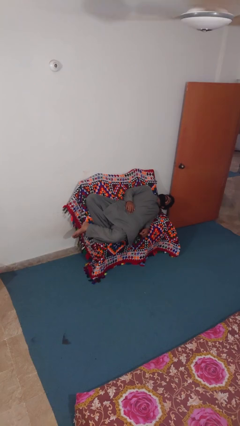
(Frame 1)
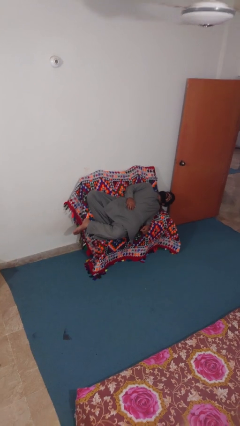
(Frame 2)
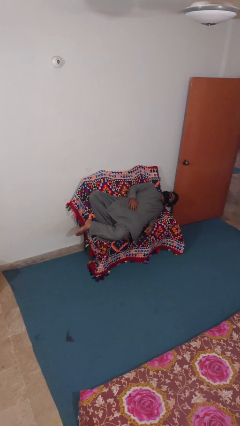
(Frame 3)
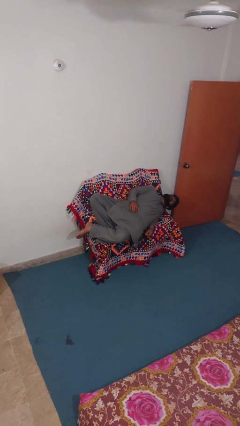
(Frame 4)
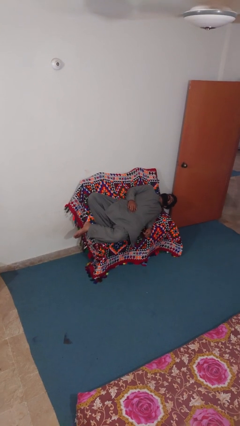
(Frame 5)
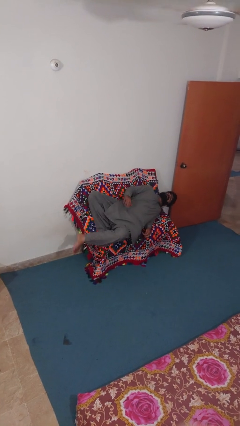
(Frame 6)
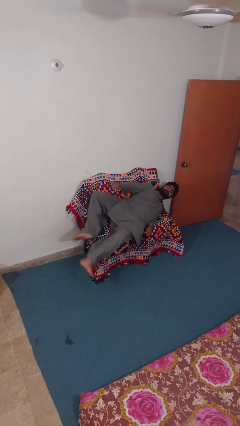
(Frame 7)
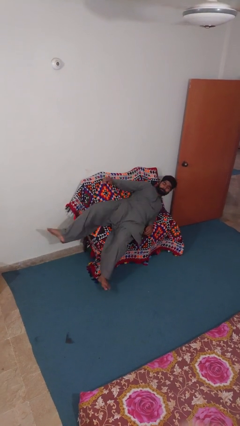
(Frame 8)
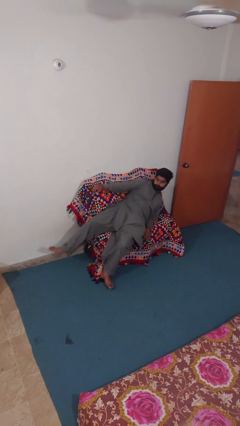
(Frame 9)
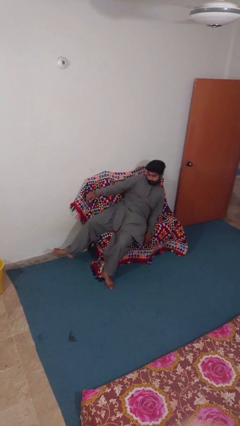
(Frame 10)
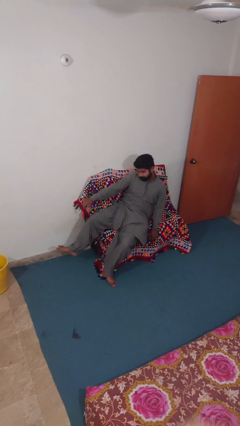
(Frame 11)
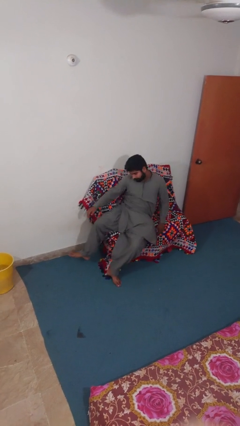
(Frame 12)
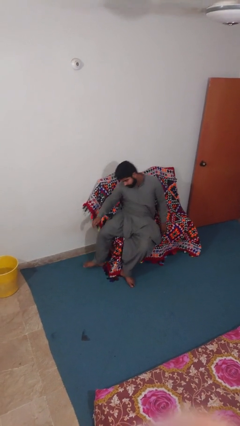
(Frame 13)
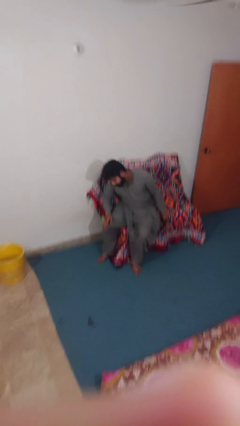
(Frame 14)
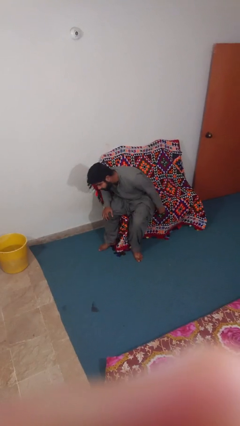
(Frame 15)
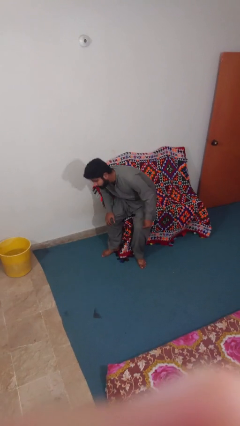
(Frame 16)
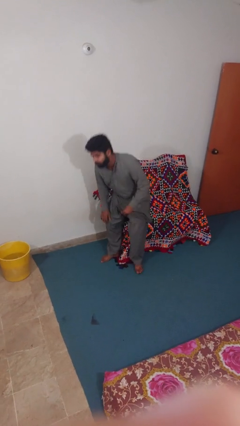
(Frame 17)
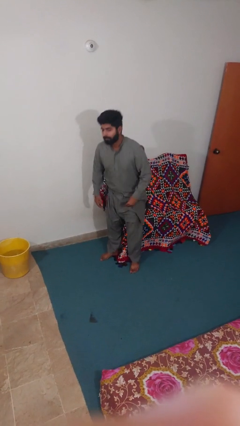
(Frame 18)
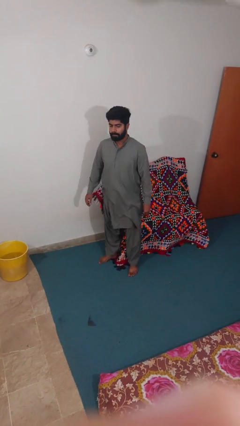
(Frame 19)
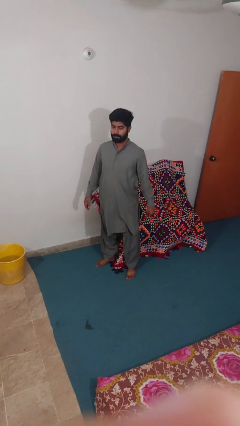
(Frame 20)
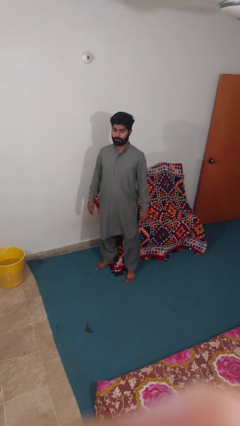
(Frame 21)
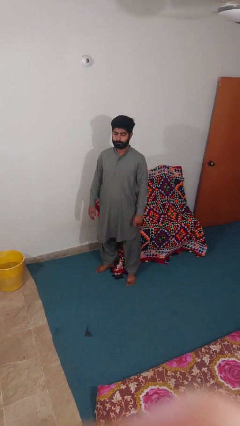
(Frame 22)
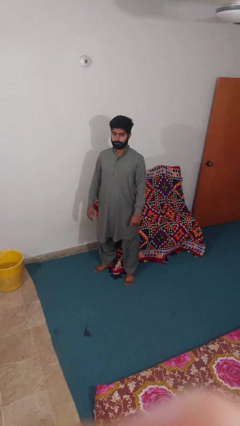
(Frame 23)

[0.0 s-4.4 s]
person stands up

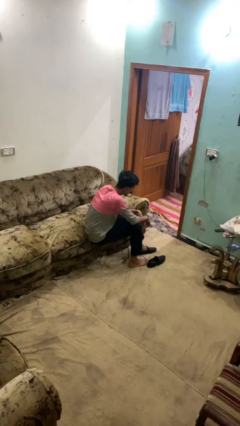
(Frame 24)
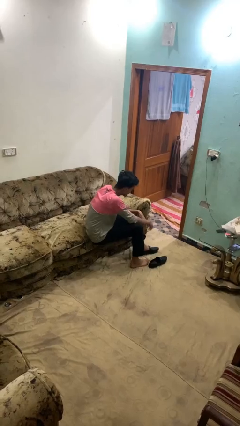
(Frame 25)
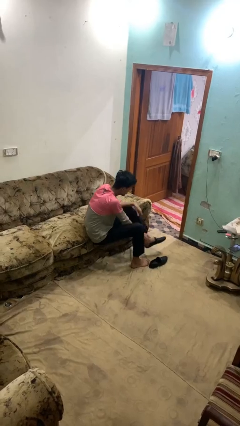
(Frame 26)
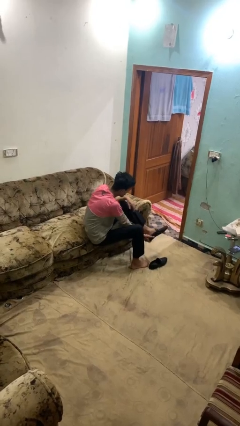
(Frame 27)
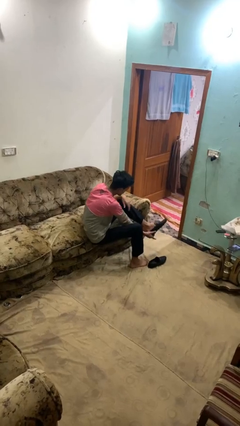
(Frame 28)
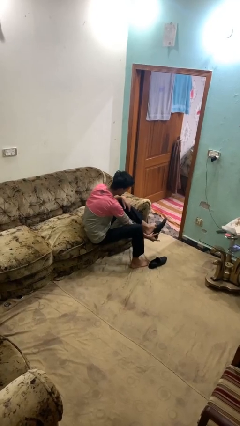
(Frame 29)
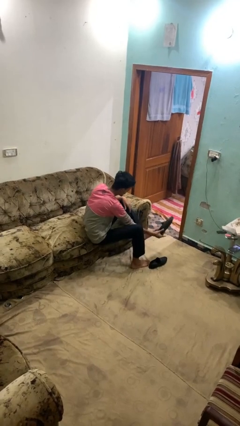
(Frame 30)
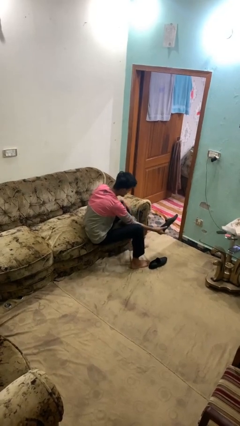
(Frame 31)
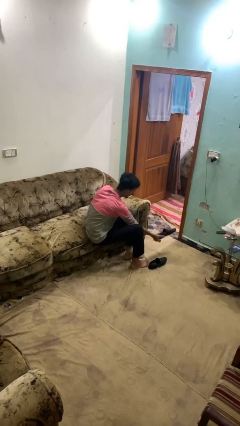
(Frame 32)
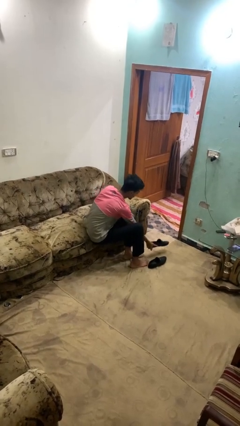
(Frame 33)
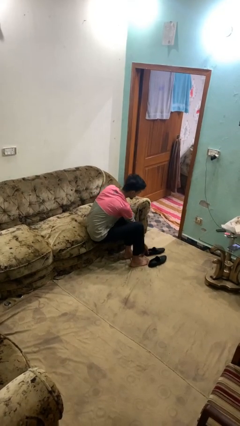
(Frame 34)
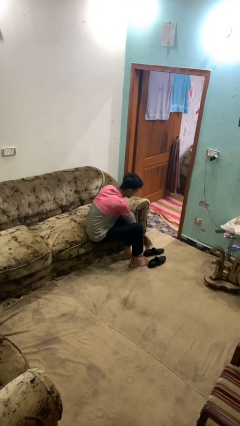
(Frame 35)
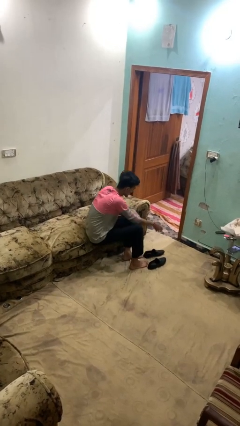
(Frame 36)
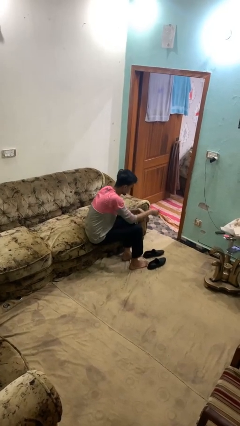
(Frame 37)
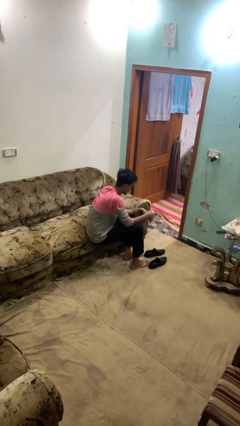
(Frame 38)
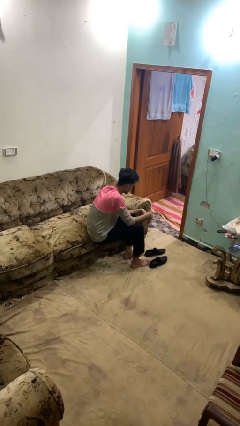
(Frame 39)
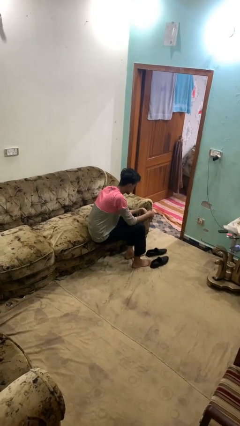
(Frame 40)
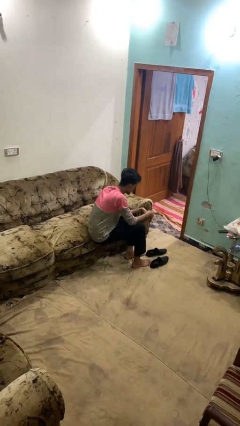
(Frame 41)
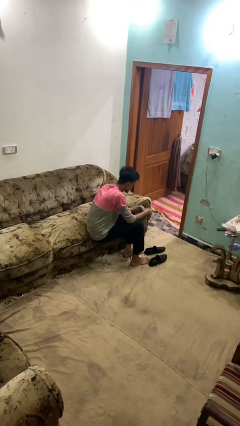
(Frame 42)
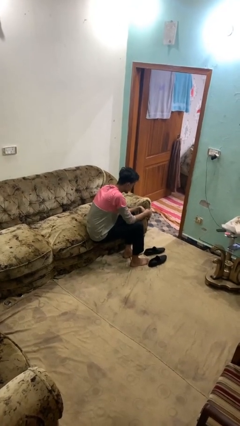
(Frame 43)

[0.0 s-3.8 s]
person takes off shoes

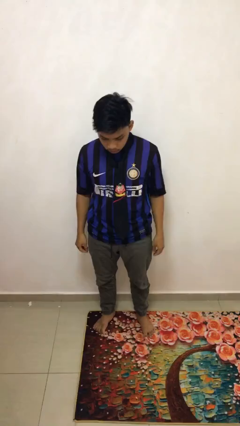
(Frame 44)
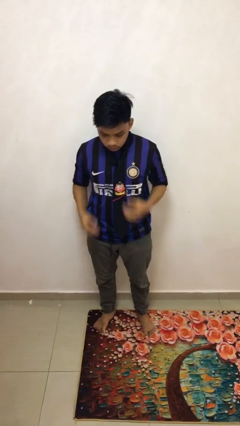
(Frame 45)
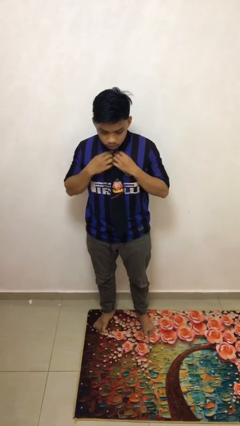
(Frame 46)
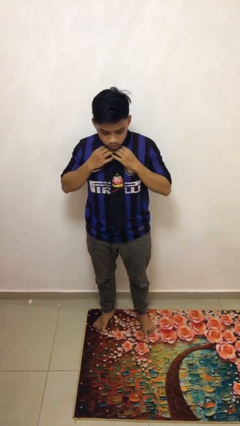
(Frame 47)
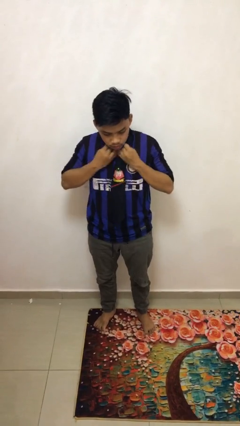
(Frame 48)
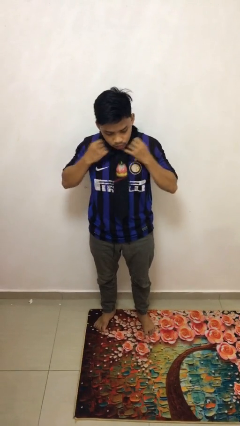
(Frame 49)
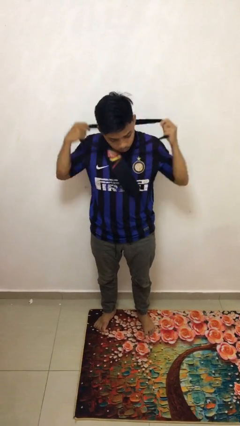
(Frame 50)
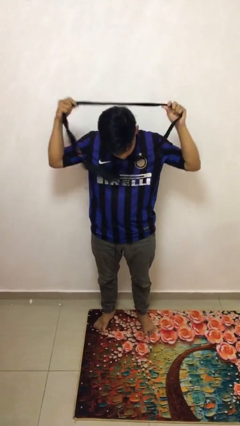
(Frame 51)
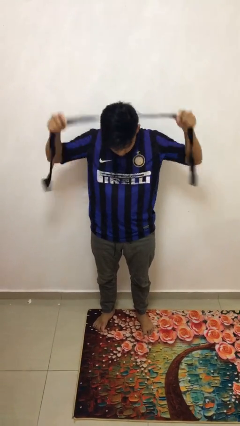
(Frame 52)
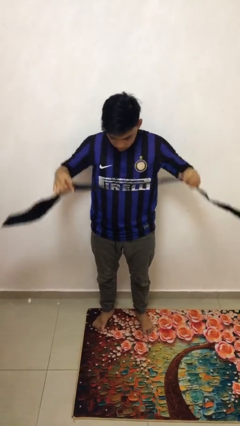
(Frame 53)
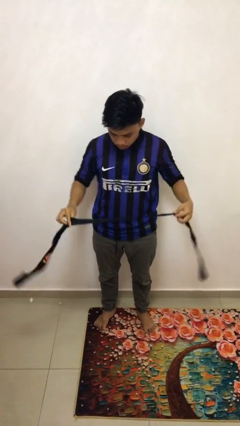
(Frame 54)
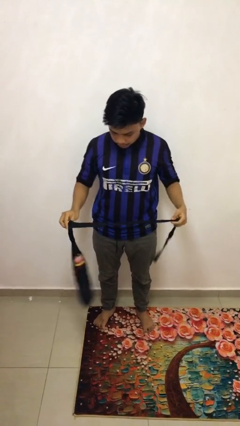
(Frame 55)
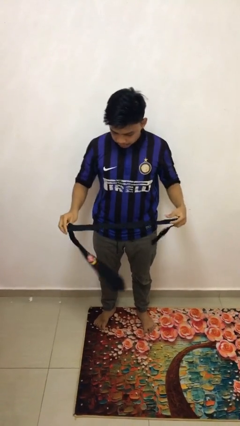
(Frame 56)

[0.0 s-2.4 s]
person takes off necktie

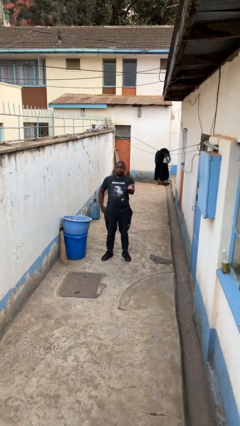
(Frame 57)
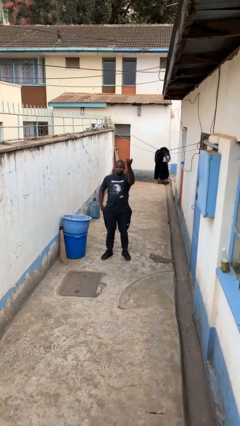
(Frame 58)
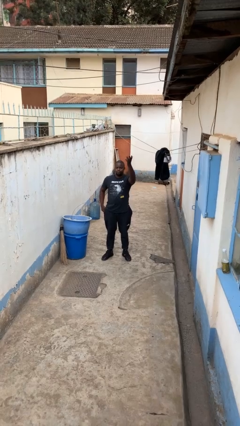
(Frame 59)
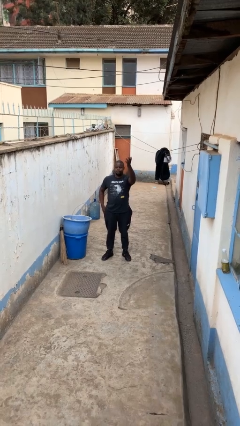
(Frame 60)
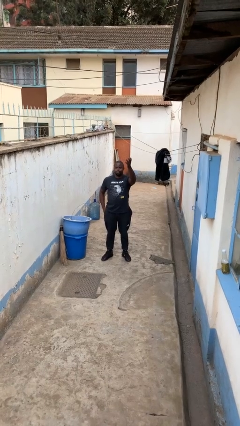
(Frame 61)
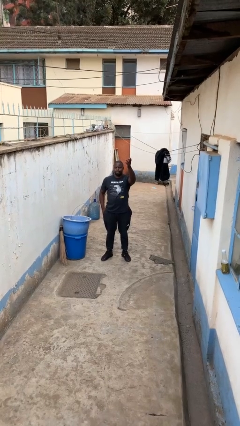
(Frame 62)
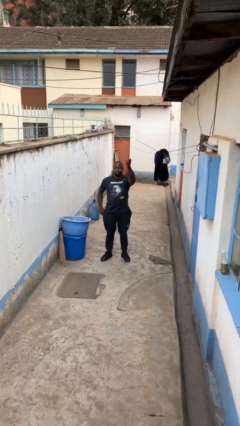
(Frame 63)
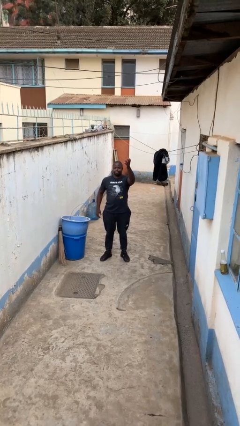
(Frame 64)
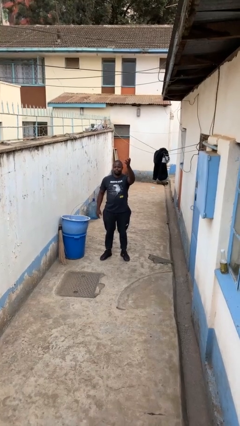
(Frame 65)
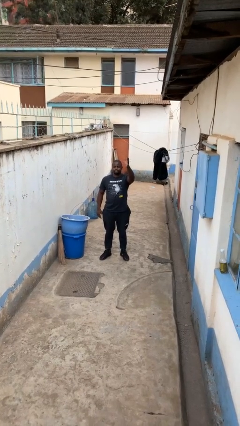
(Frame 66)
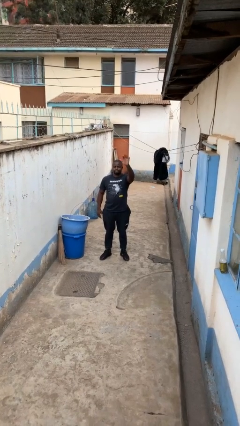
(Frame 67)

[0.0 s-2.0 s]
person gestures swipe up

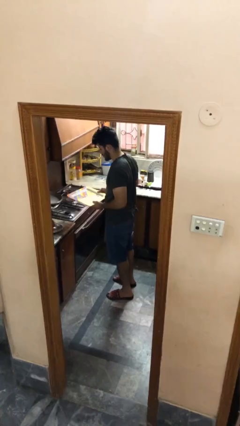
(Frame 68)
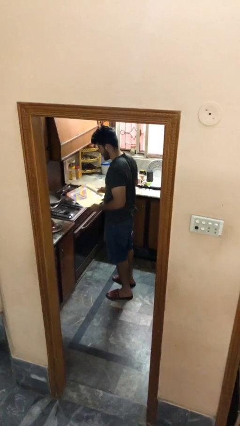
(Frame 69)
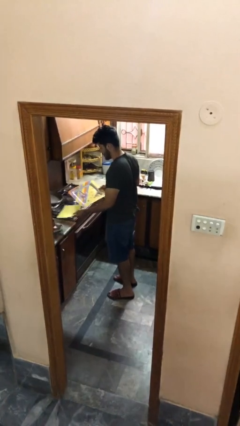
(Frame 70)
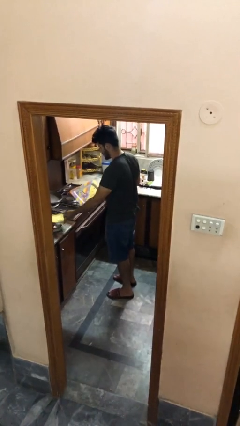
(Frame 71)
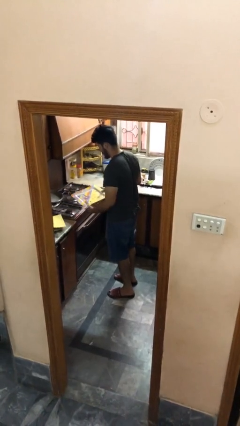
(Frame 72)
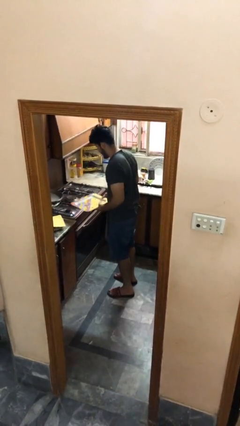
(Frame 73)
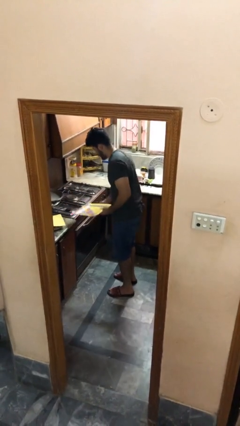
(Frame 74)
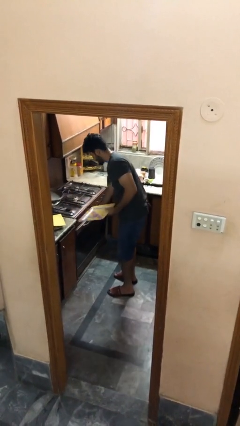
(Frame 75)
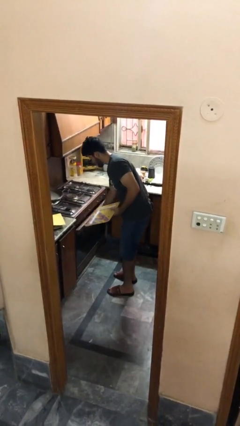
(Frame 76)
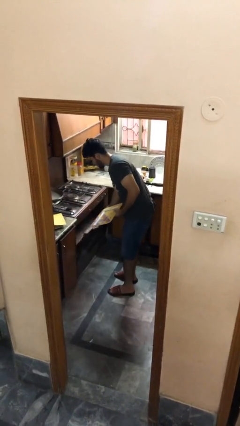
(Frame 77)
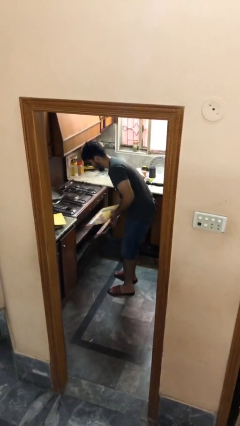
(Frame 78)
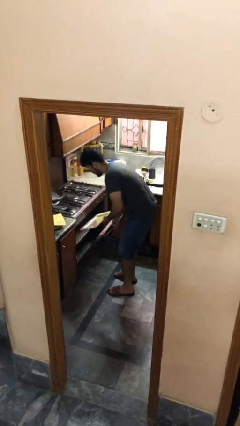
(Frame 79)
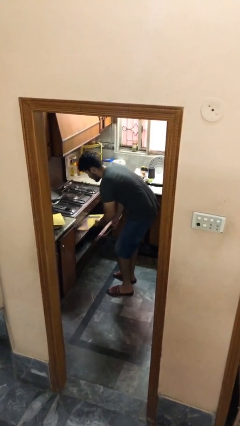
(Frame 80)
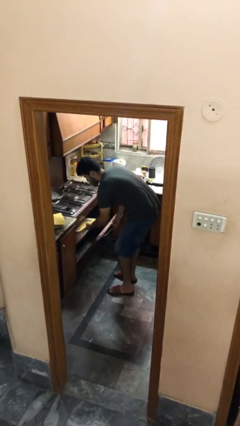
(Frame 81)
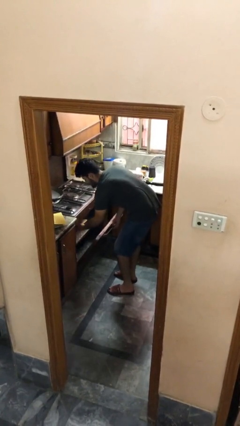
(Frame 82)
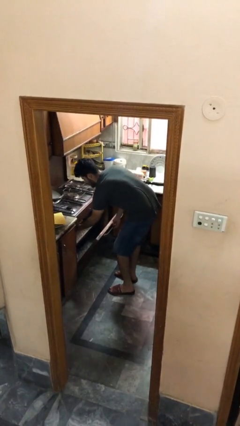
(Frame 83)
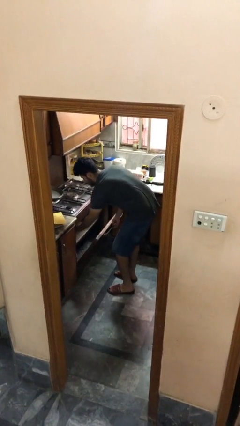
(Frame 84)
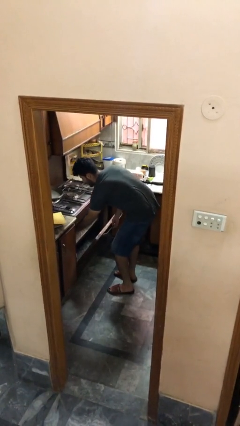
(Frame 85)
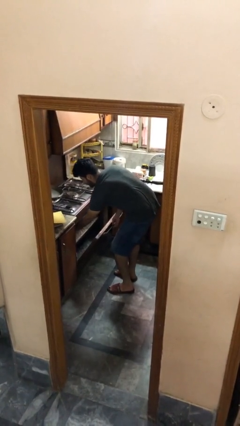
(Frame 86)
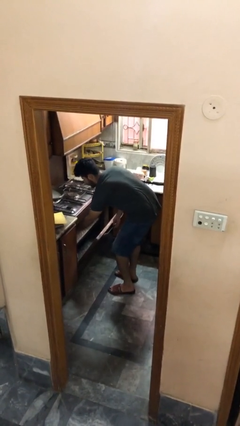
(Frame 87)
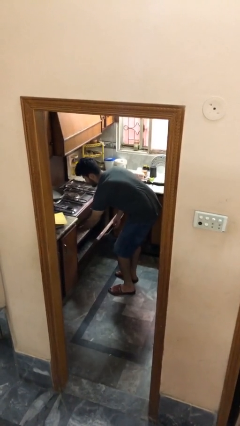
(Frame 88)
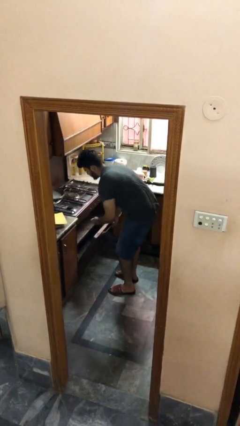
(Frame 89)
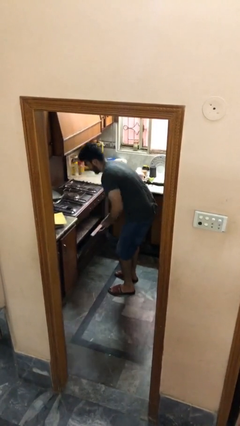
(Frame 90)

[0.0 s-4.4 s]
person puts object into oven

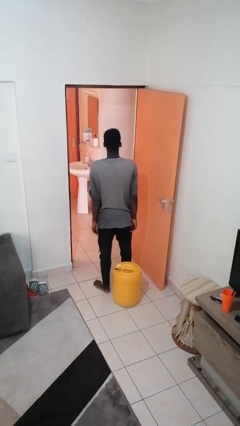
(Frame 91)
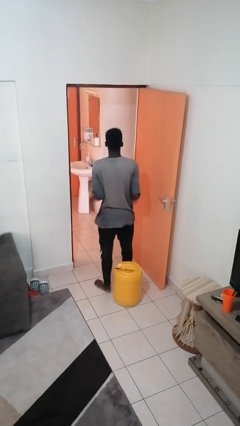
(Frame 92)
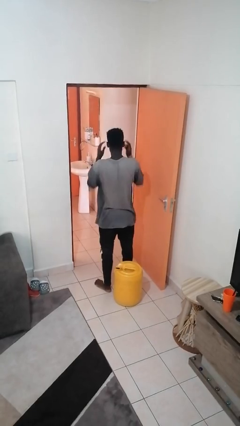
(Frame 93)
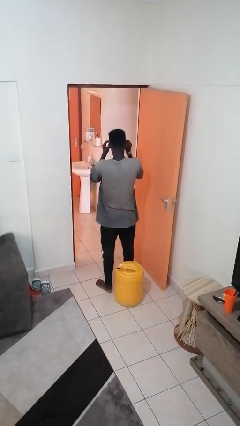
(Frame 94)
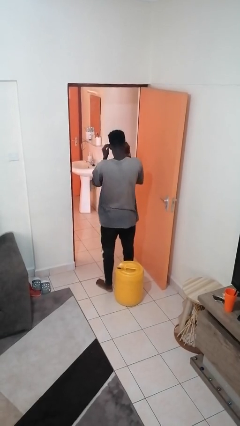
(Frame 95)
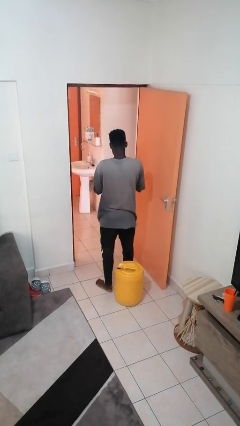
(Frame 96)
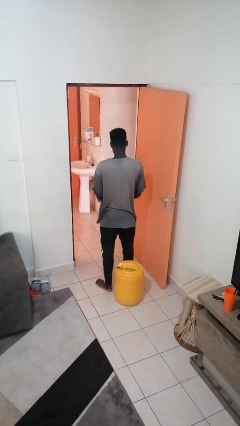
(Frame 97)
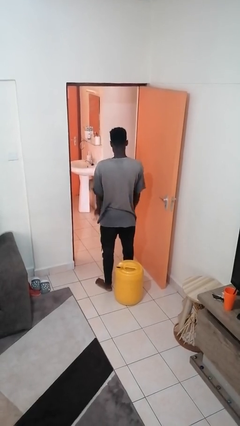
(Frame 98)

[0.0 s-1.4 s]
person takes off glasses
